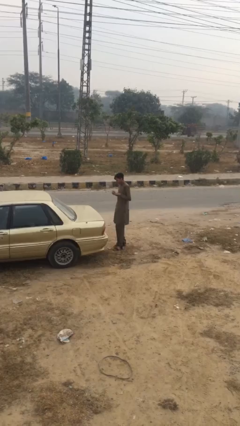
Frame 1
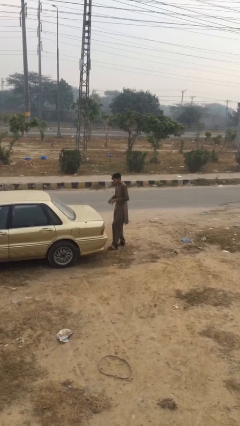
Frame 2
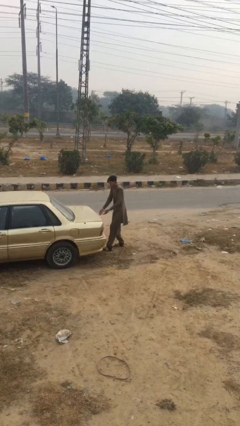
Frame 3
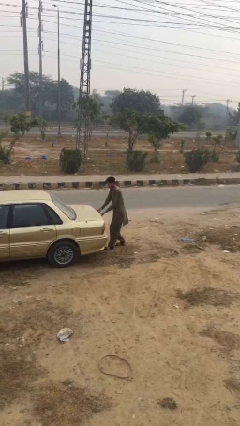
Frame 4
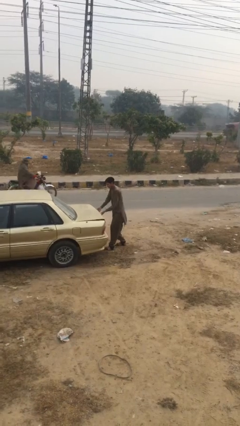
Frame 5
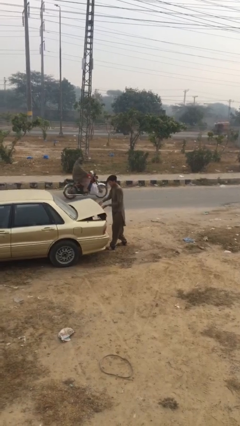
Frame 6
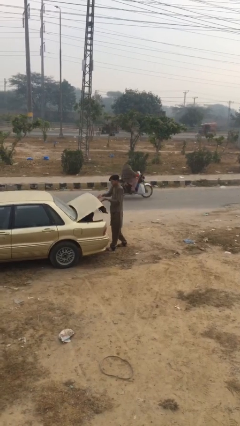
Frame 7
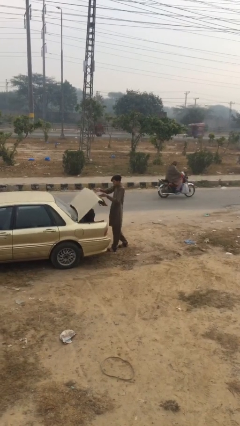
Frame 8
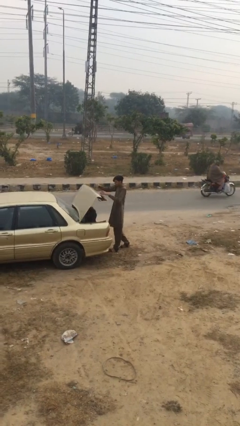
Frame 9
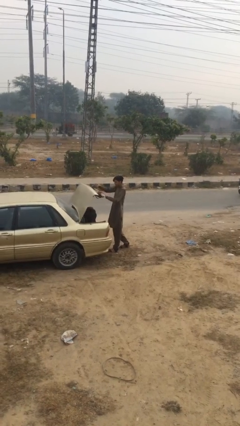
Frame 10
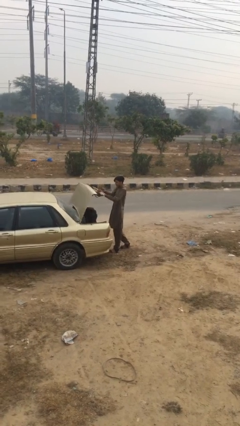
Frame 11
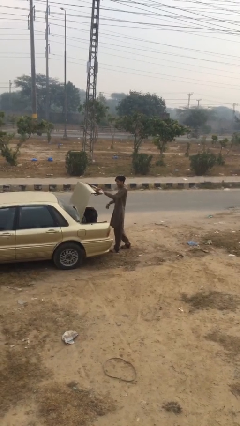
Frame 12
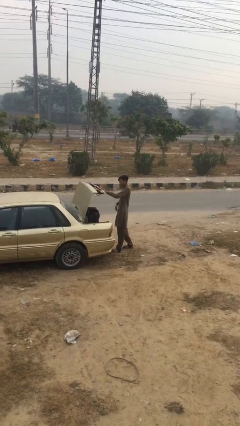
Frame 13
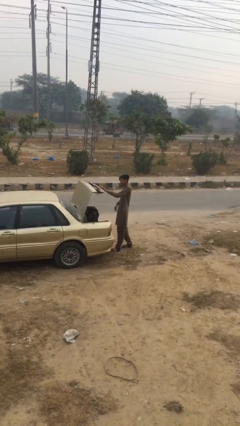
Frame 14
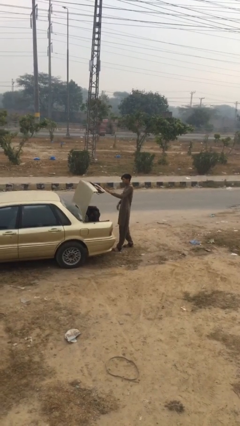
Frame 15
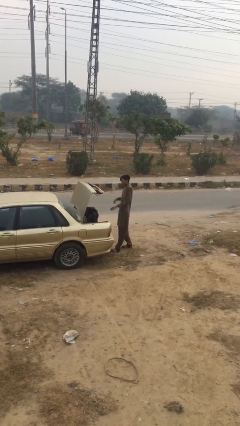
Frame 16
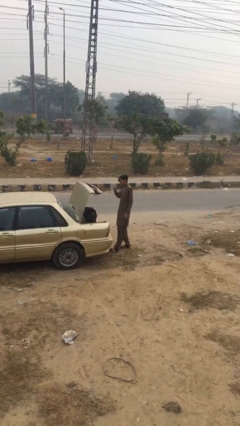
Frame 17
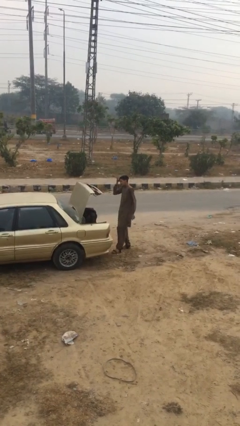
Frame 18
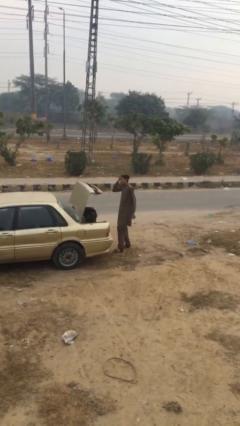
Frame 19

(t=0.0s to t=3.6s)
person opens car trunk

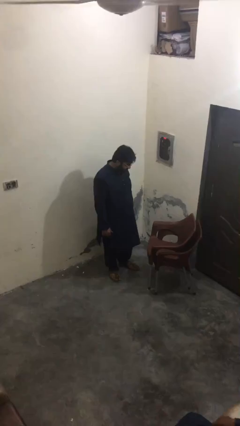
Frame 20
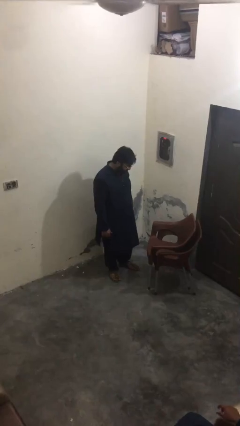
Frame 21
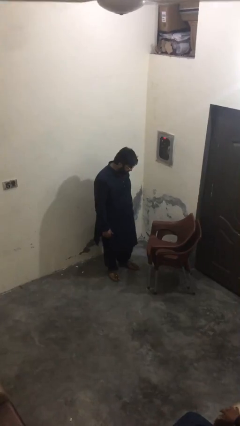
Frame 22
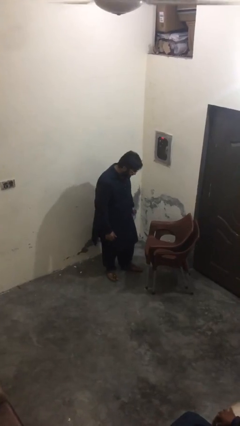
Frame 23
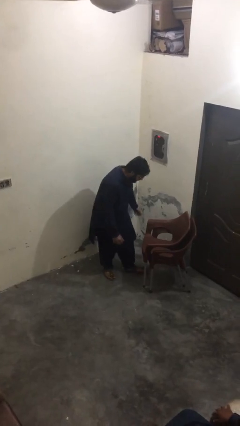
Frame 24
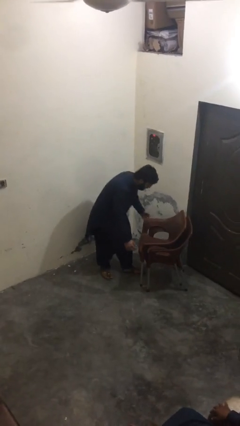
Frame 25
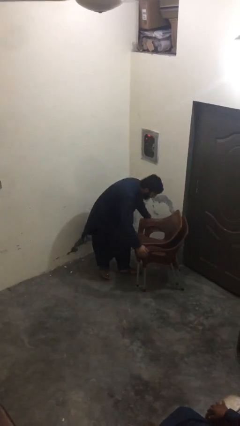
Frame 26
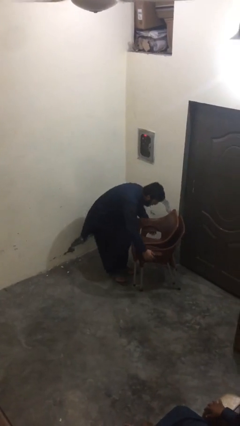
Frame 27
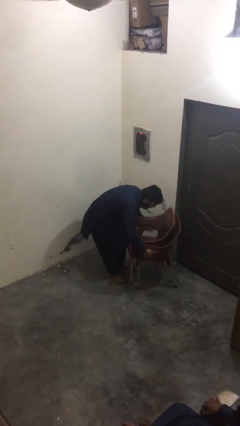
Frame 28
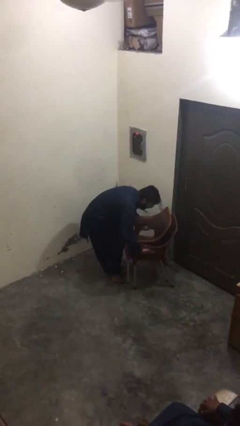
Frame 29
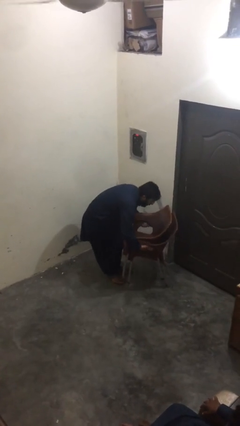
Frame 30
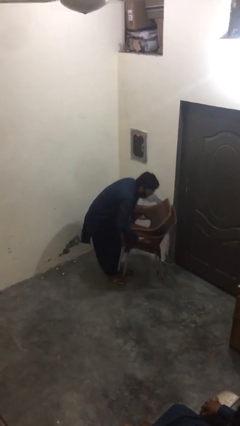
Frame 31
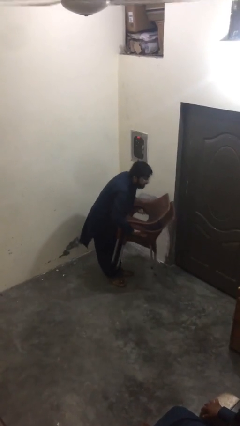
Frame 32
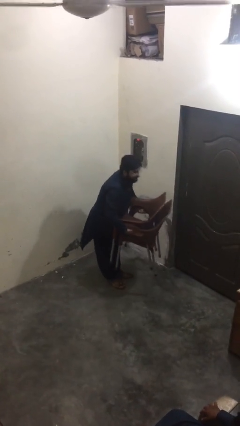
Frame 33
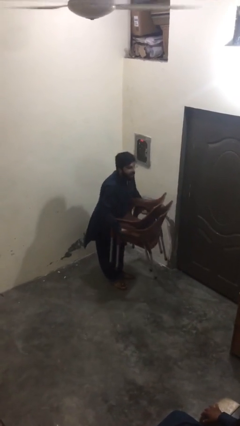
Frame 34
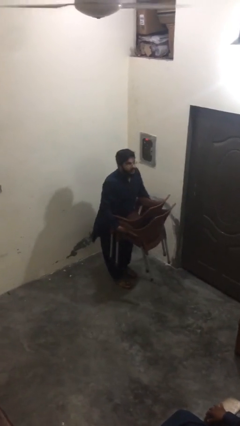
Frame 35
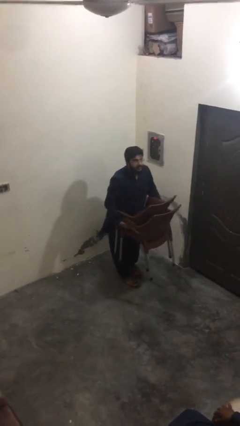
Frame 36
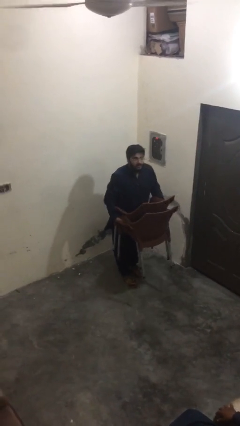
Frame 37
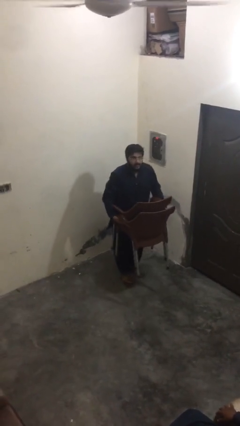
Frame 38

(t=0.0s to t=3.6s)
person picks up object from floor

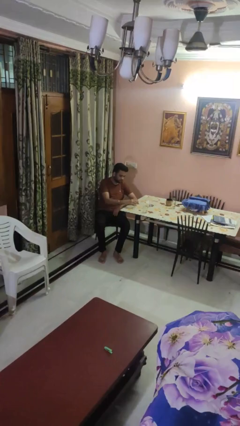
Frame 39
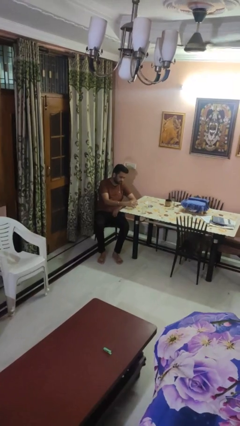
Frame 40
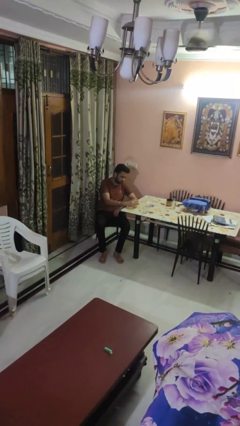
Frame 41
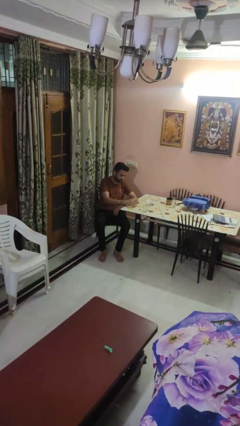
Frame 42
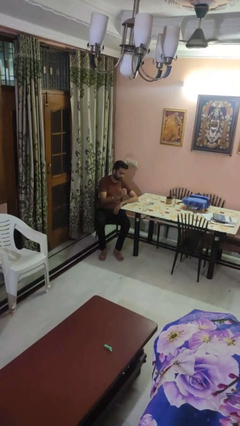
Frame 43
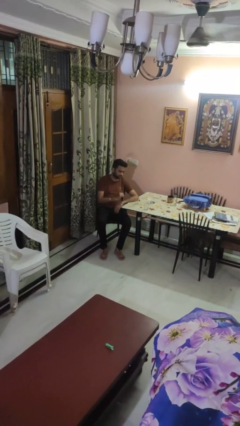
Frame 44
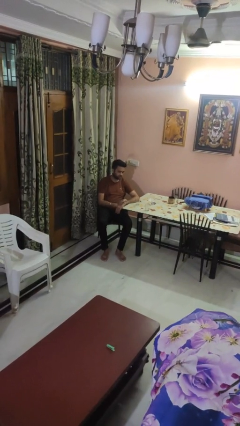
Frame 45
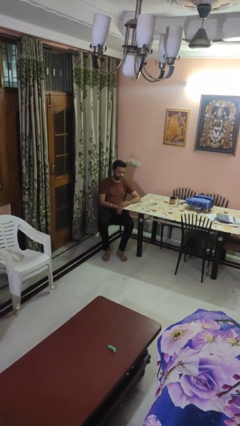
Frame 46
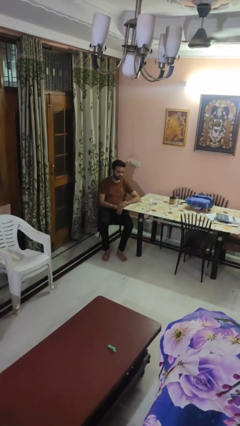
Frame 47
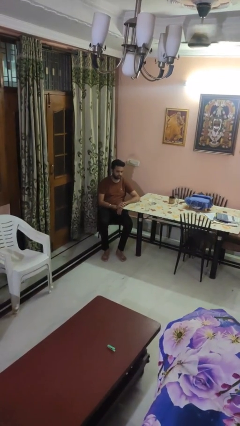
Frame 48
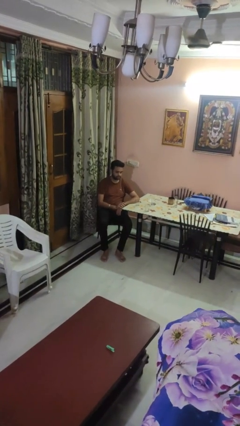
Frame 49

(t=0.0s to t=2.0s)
person puts down object on table

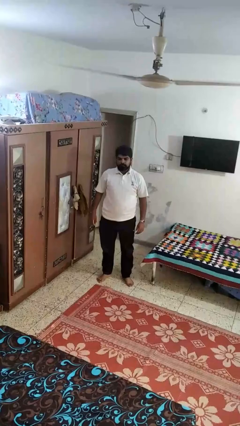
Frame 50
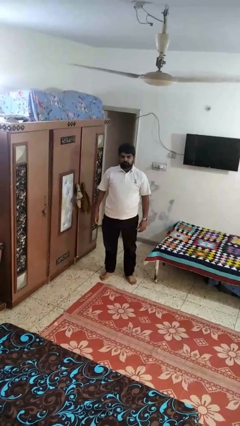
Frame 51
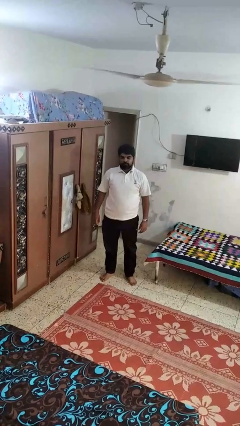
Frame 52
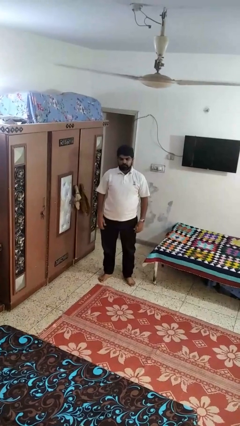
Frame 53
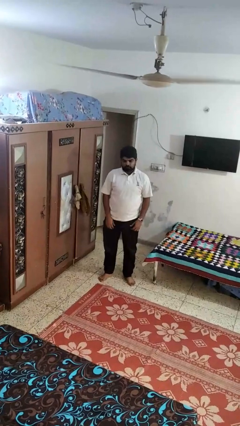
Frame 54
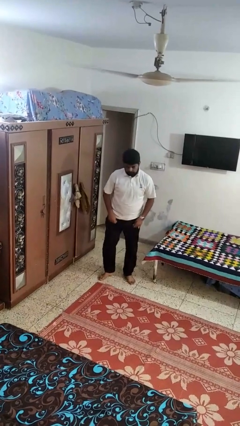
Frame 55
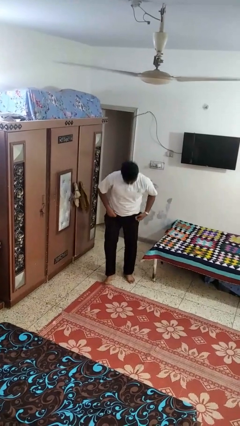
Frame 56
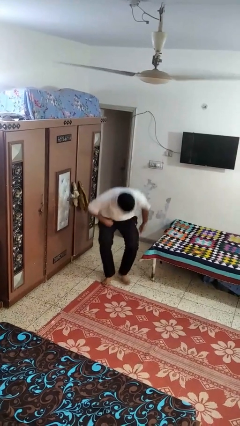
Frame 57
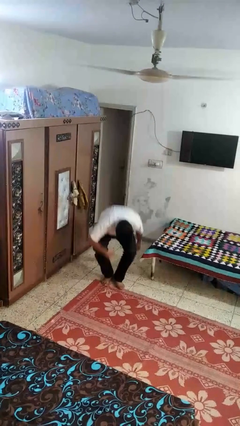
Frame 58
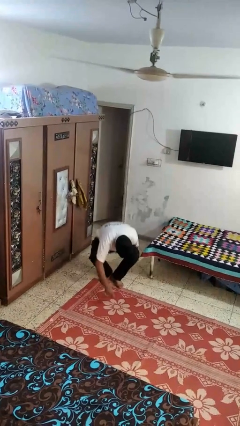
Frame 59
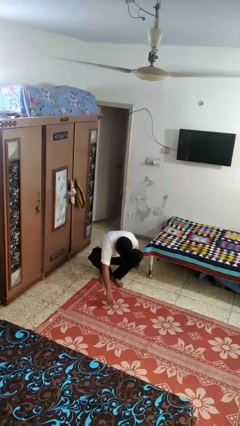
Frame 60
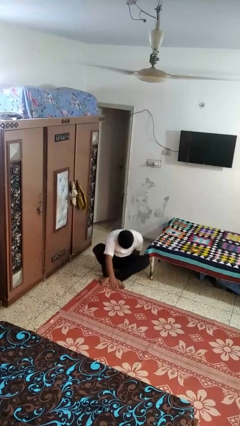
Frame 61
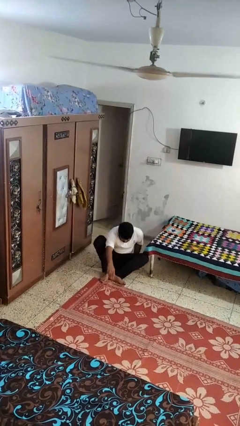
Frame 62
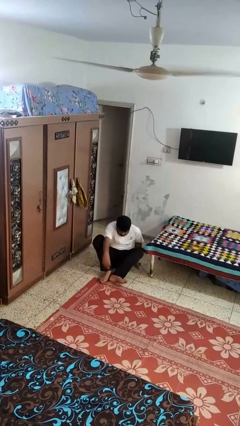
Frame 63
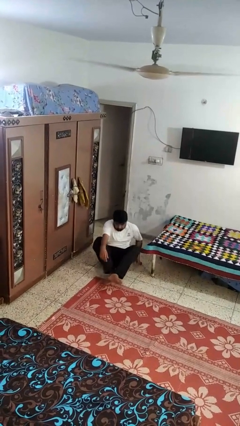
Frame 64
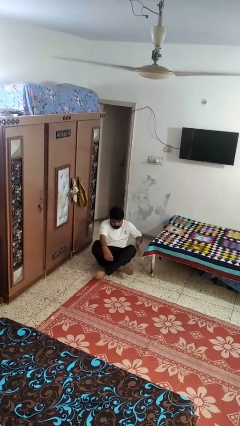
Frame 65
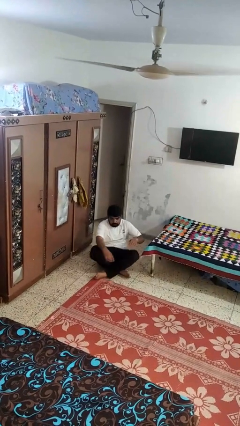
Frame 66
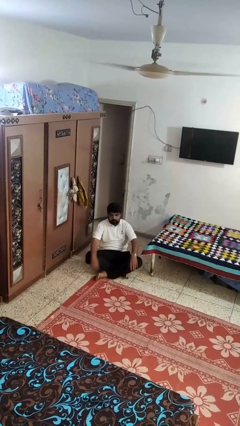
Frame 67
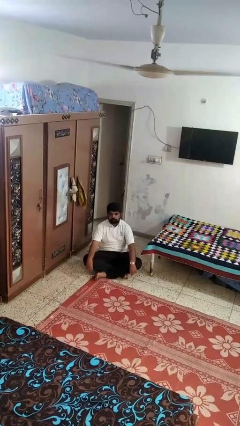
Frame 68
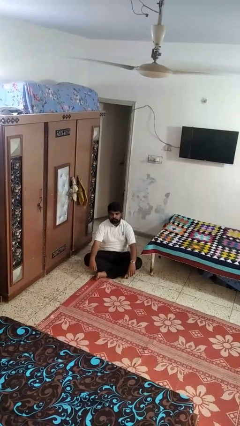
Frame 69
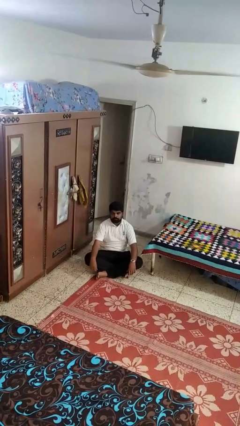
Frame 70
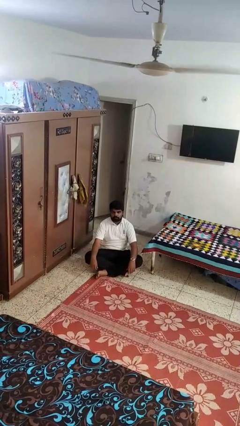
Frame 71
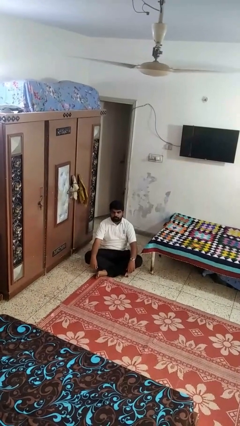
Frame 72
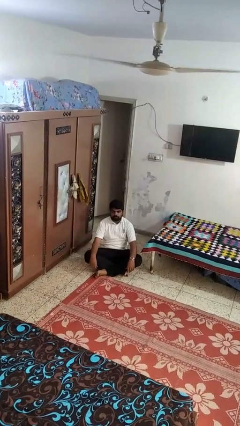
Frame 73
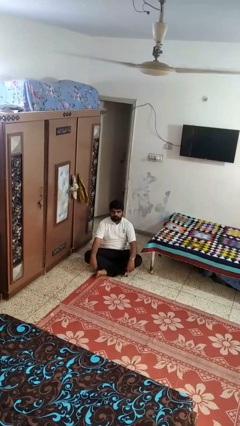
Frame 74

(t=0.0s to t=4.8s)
person sits crisscross

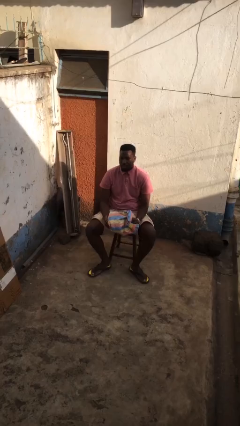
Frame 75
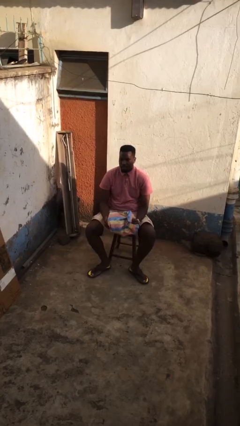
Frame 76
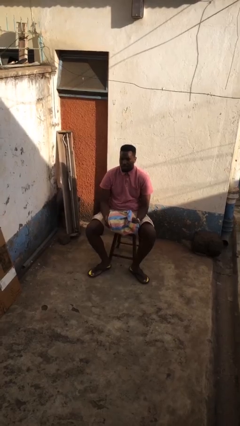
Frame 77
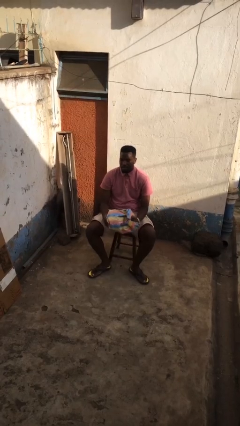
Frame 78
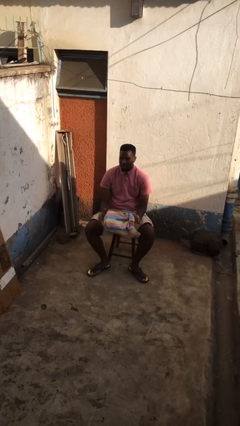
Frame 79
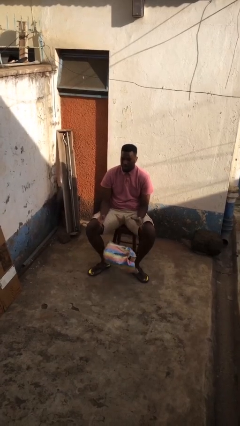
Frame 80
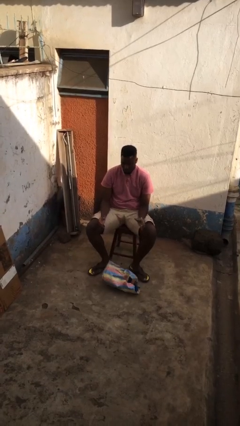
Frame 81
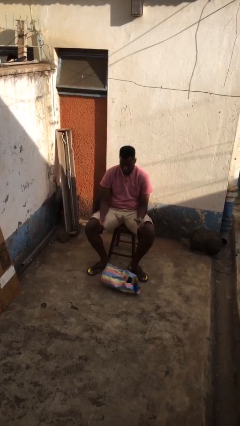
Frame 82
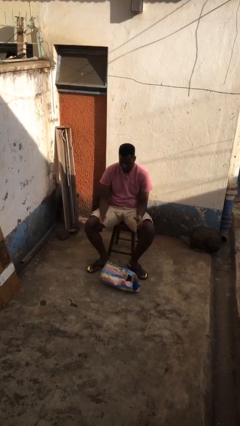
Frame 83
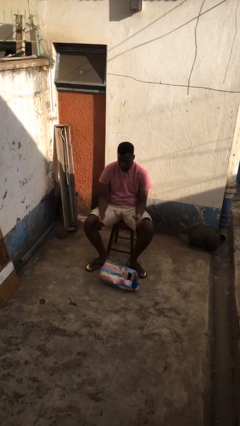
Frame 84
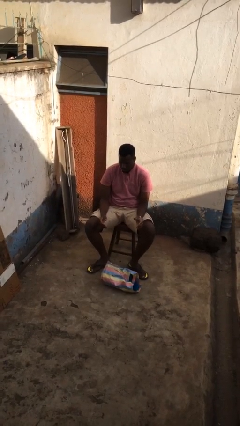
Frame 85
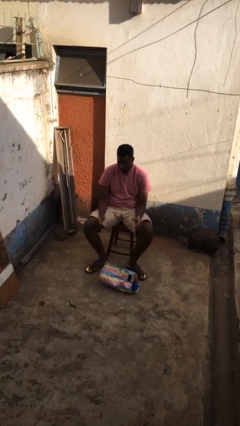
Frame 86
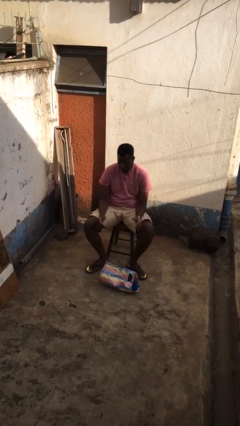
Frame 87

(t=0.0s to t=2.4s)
person drops object

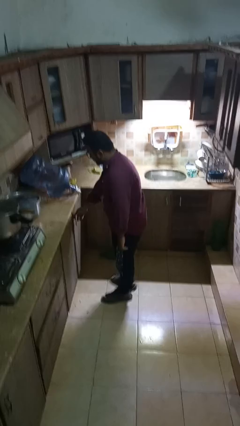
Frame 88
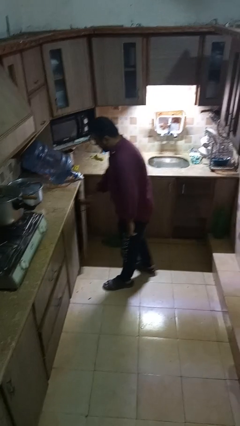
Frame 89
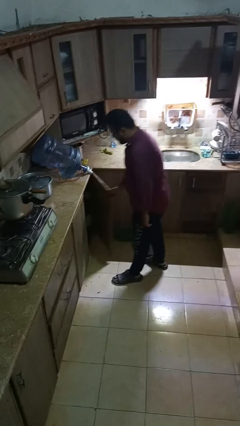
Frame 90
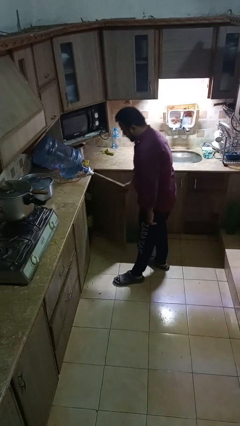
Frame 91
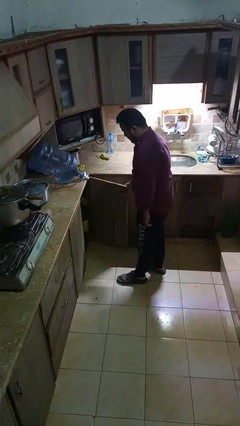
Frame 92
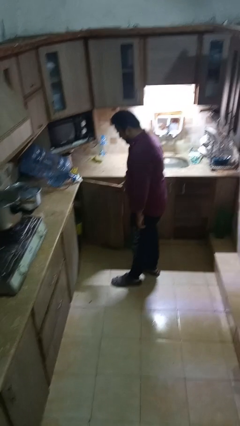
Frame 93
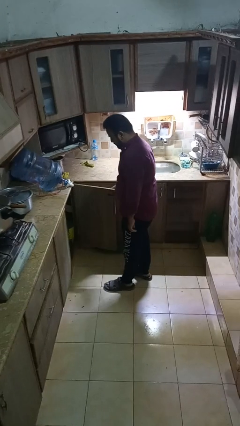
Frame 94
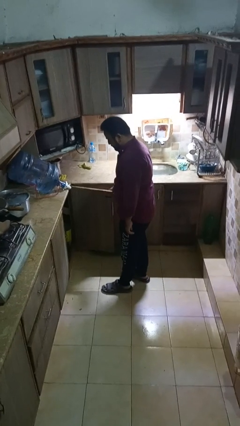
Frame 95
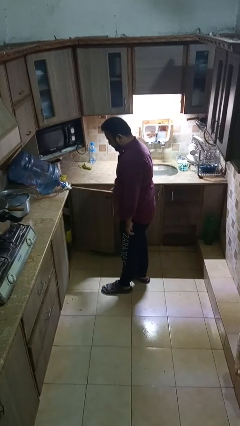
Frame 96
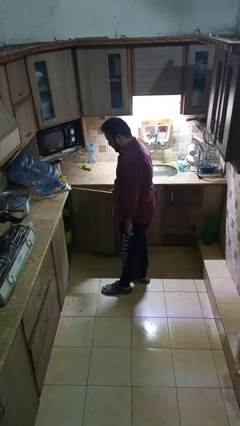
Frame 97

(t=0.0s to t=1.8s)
person opens cabinet
